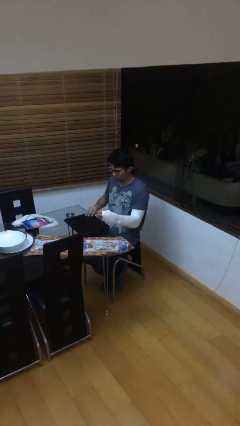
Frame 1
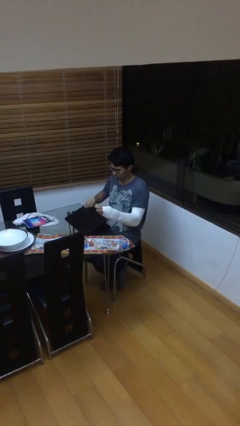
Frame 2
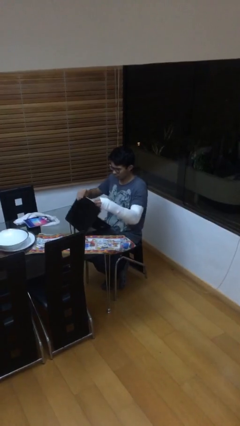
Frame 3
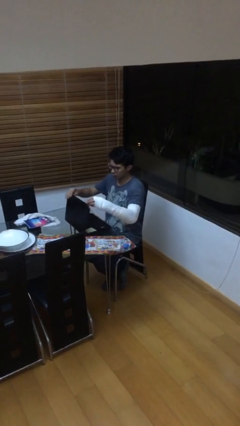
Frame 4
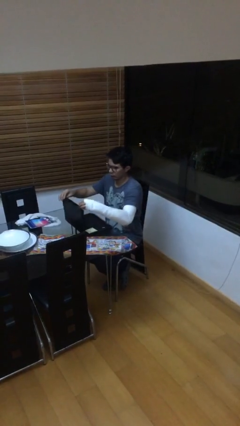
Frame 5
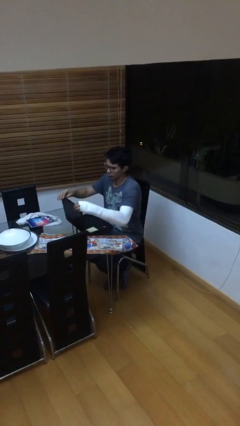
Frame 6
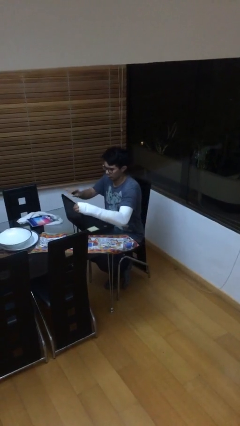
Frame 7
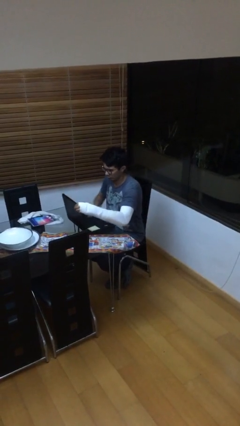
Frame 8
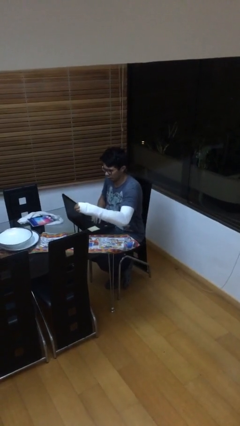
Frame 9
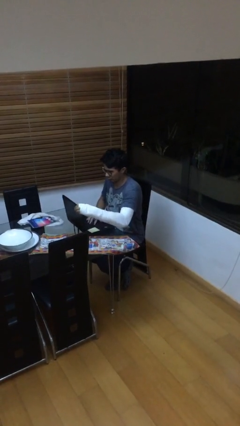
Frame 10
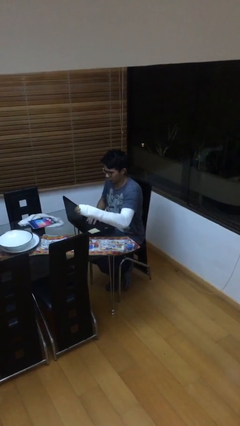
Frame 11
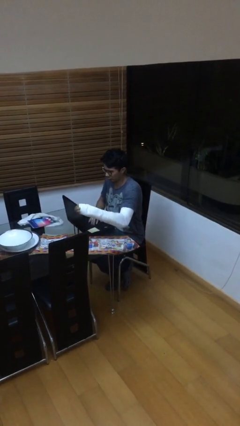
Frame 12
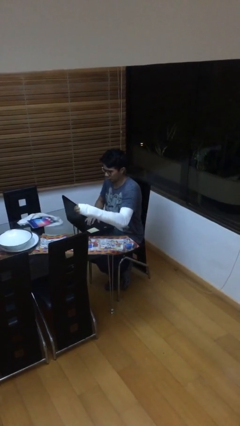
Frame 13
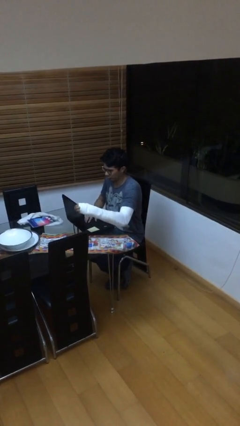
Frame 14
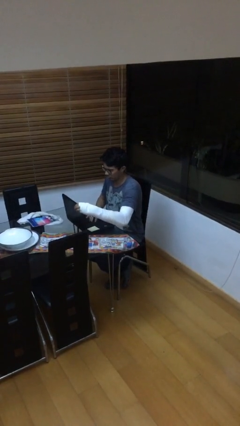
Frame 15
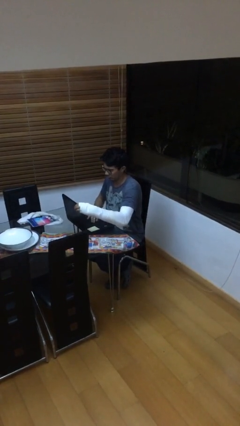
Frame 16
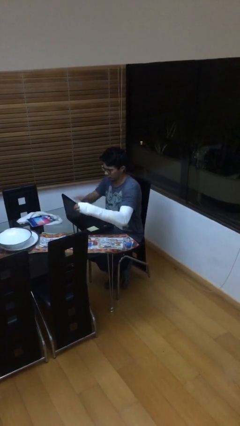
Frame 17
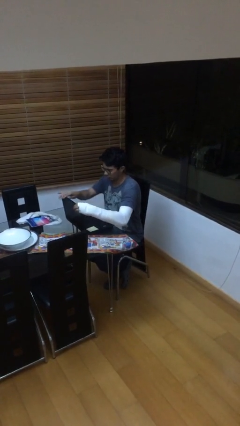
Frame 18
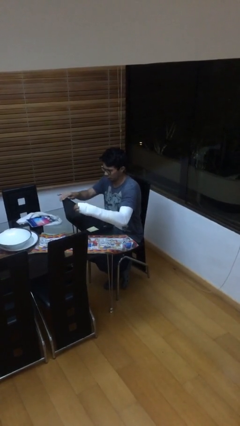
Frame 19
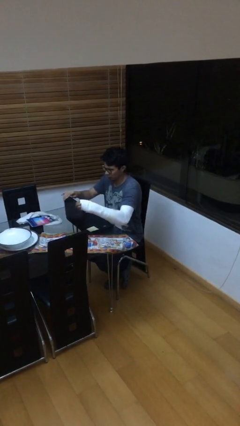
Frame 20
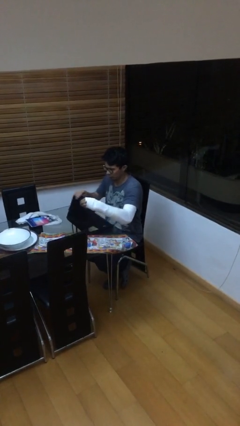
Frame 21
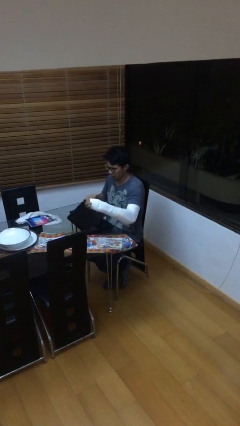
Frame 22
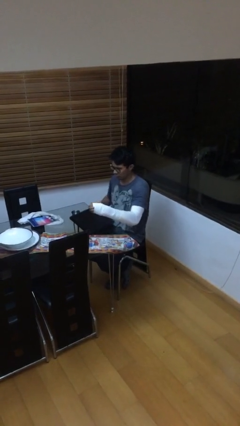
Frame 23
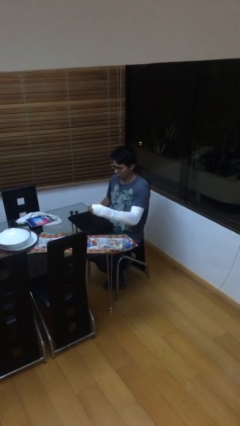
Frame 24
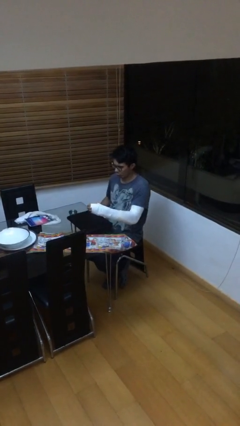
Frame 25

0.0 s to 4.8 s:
person interacts with laptop

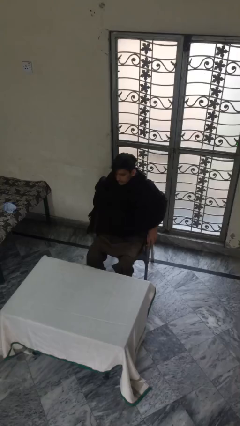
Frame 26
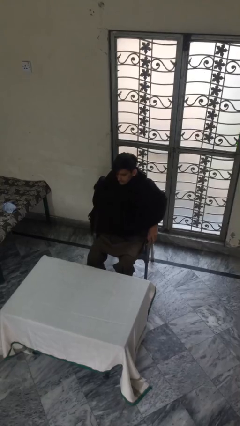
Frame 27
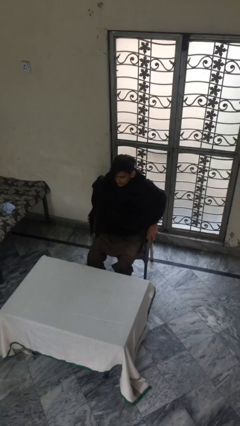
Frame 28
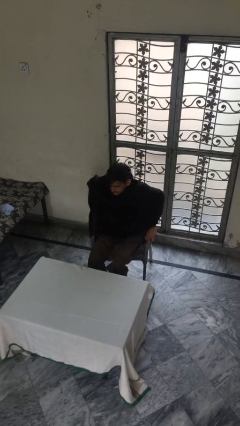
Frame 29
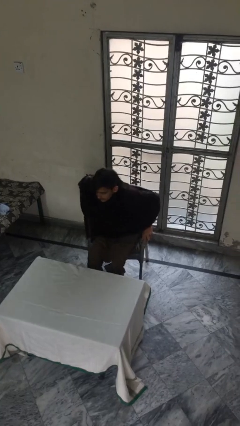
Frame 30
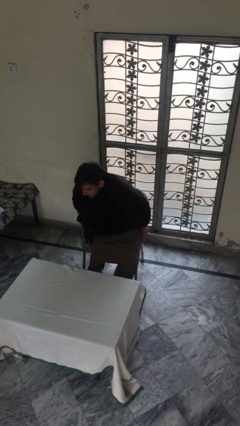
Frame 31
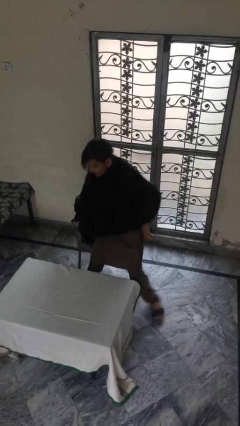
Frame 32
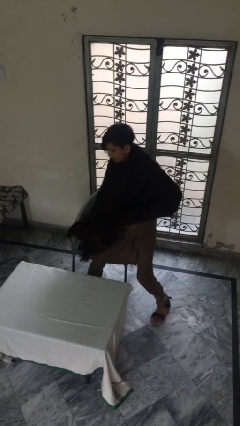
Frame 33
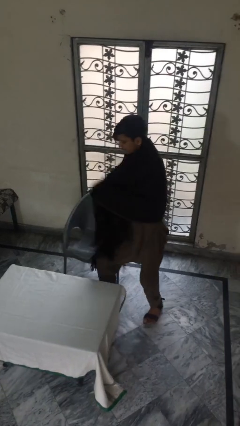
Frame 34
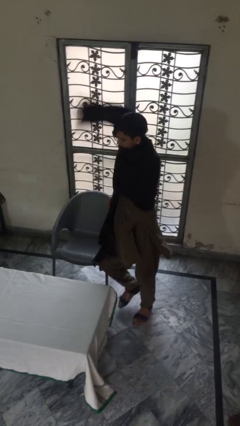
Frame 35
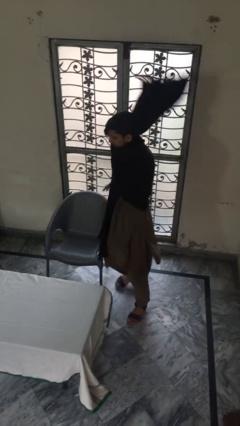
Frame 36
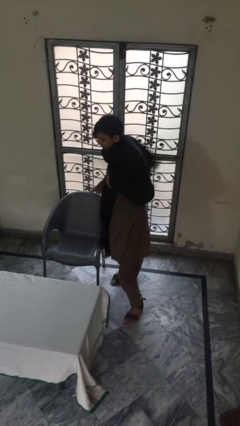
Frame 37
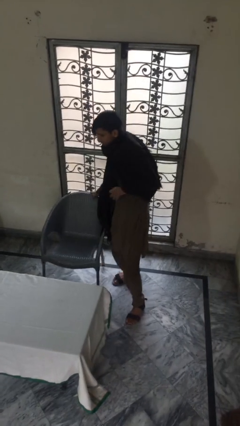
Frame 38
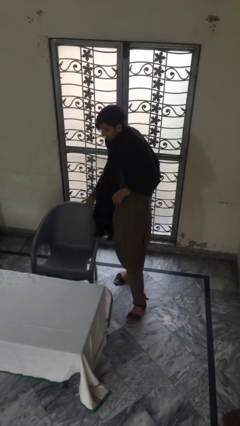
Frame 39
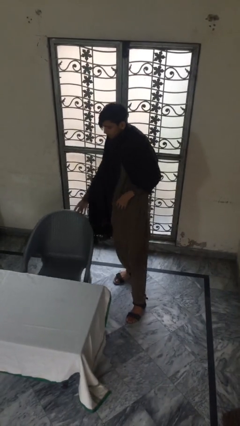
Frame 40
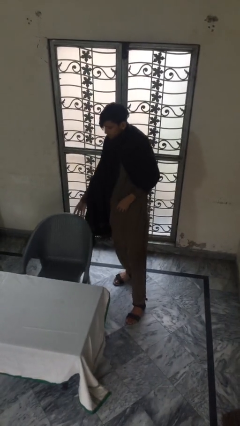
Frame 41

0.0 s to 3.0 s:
person stands up

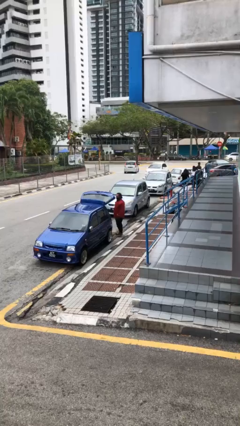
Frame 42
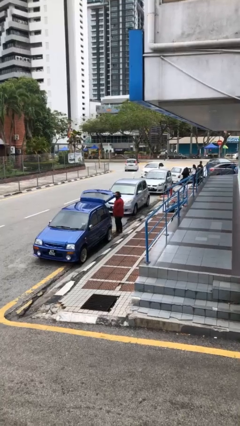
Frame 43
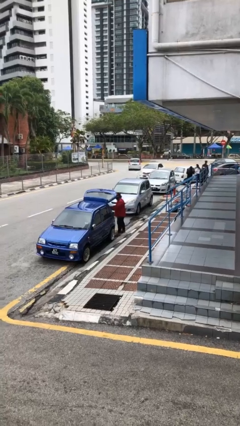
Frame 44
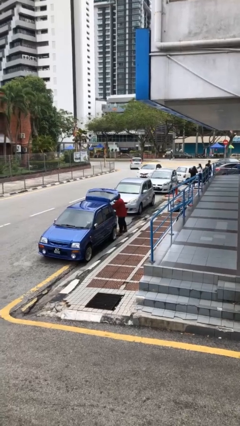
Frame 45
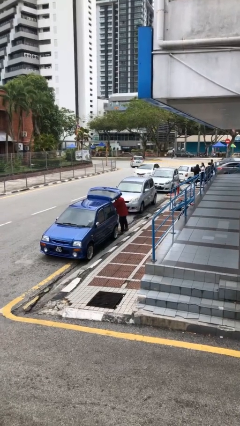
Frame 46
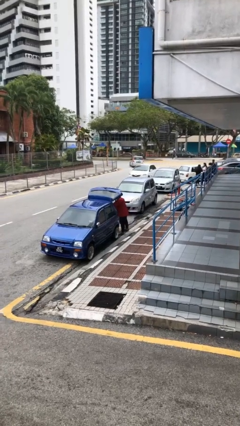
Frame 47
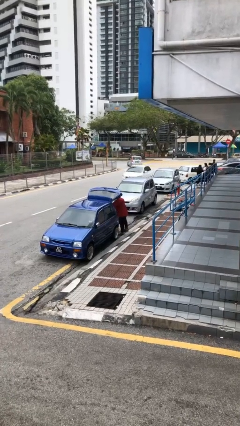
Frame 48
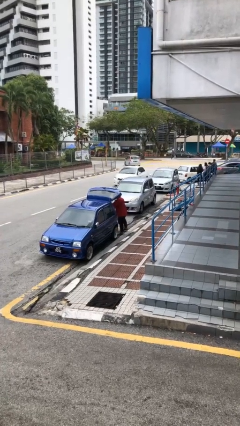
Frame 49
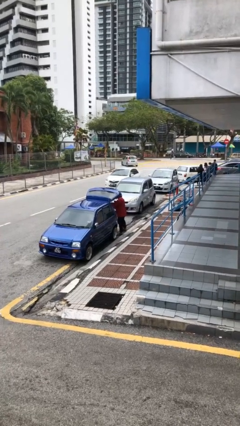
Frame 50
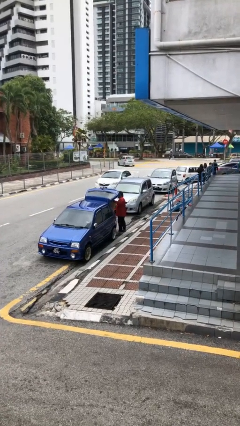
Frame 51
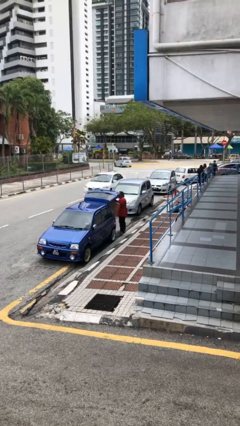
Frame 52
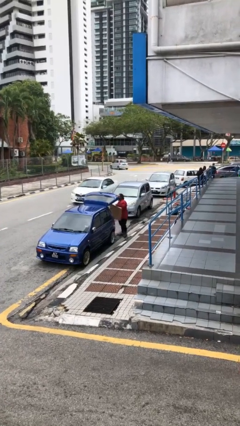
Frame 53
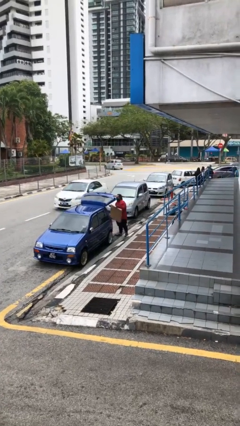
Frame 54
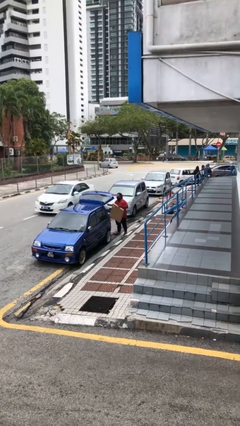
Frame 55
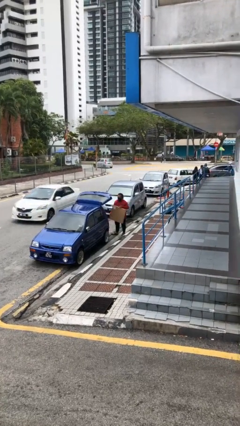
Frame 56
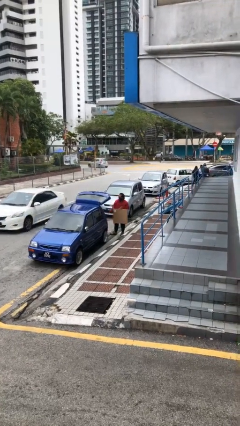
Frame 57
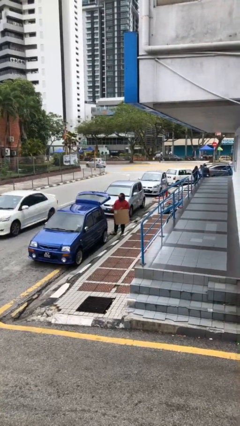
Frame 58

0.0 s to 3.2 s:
person unloads car

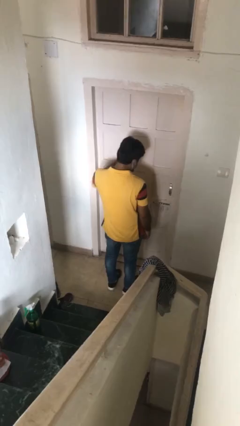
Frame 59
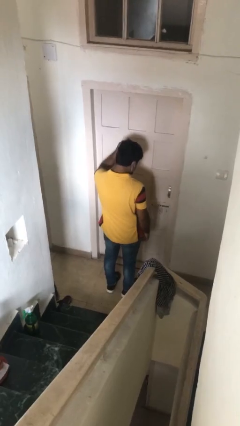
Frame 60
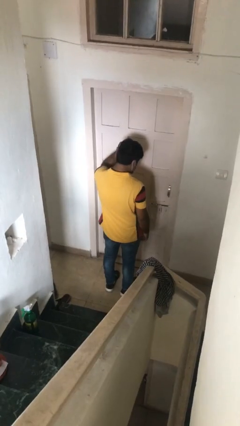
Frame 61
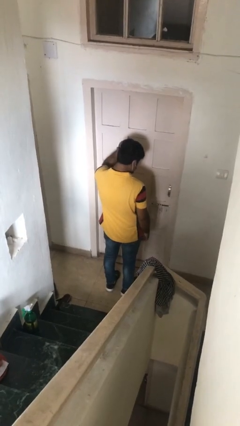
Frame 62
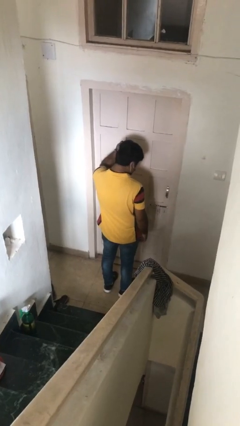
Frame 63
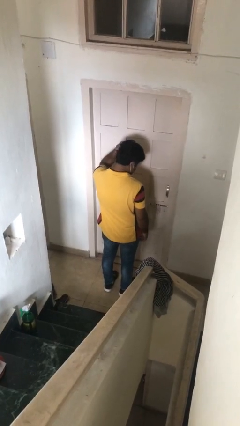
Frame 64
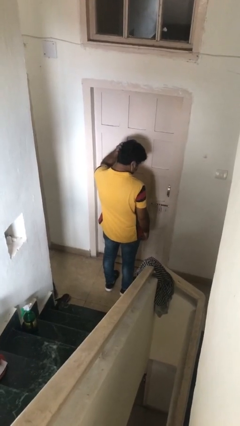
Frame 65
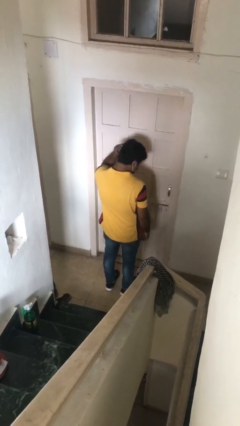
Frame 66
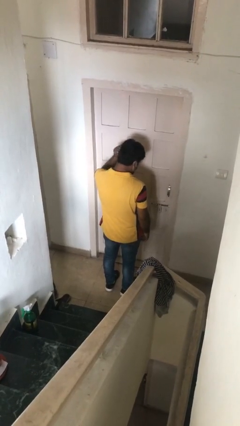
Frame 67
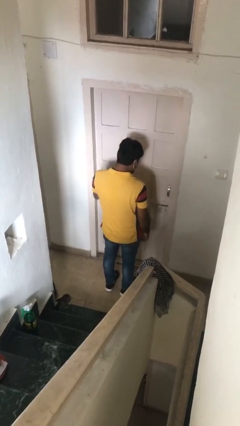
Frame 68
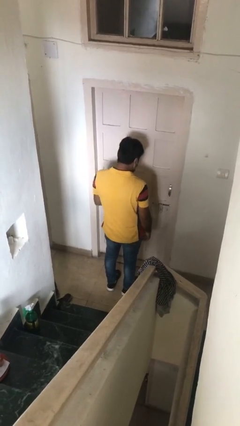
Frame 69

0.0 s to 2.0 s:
person scratches face

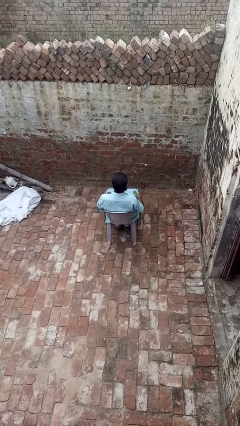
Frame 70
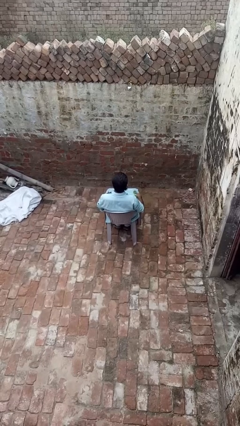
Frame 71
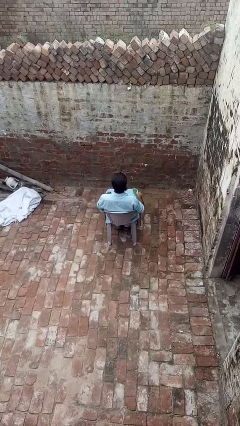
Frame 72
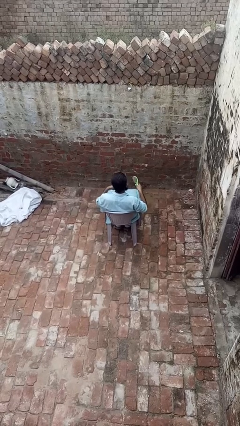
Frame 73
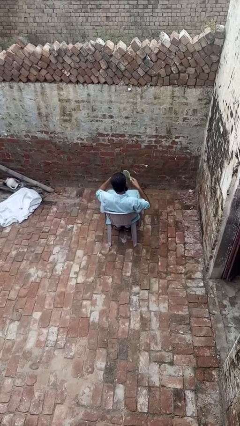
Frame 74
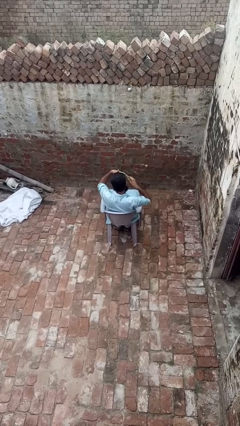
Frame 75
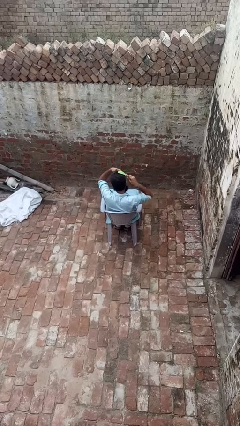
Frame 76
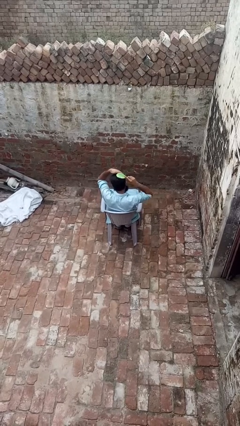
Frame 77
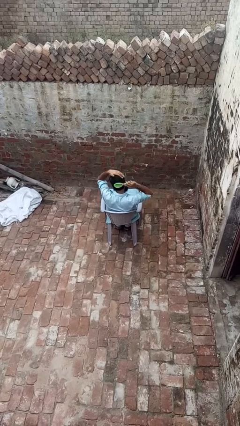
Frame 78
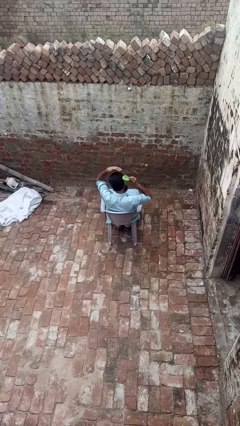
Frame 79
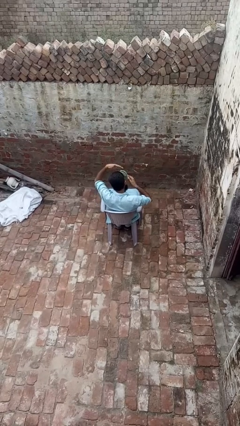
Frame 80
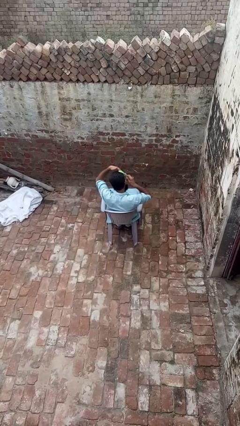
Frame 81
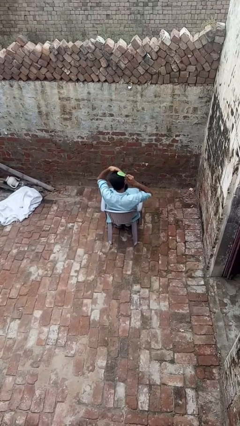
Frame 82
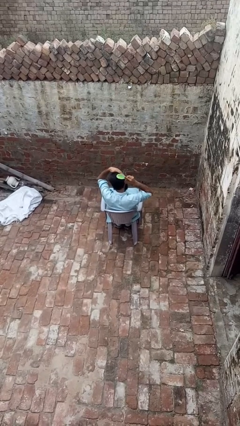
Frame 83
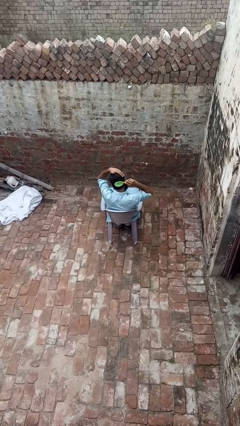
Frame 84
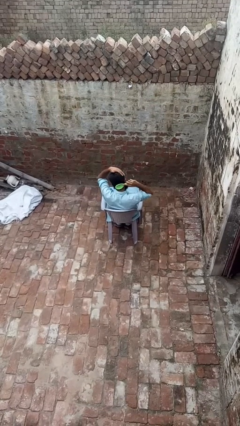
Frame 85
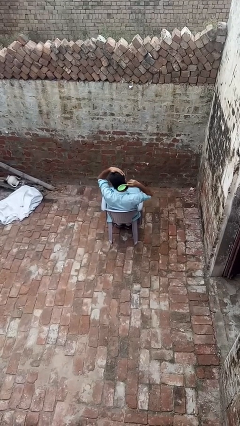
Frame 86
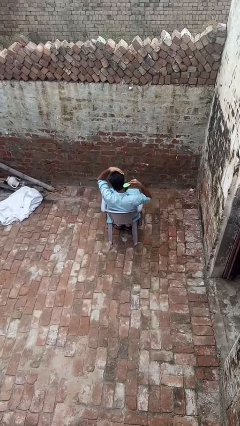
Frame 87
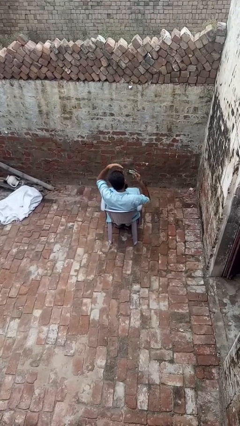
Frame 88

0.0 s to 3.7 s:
person brushes hair

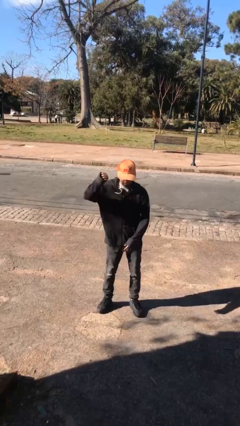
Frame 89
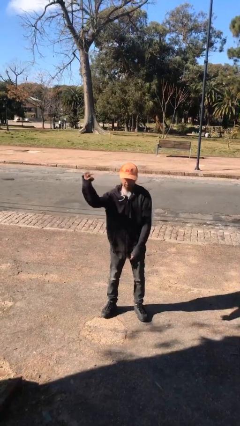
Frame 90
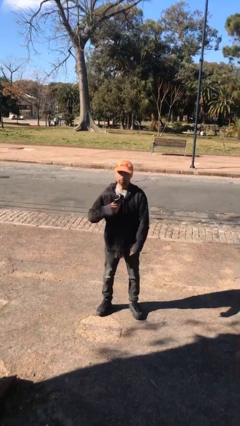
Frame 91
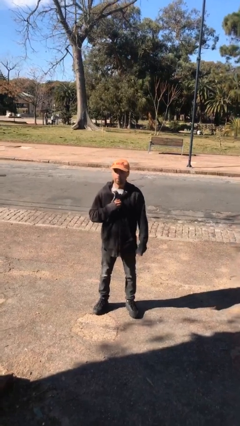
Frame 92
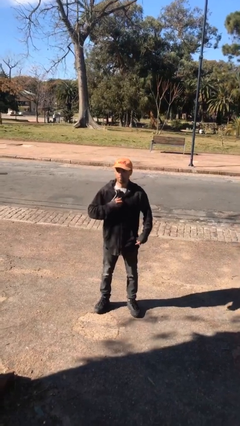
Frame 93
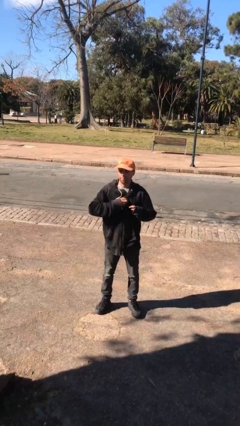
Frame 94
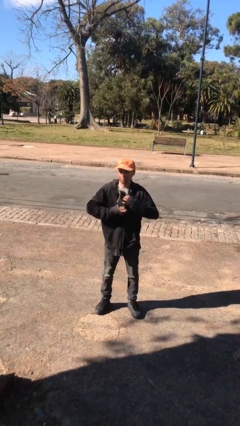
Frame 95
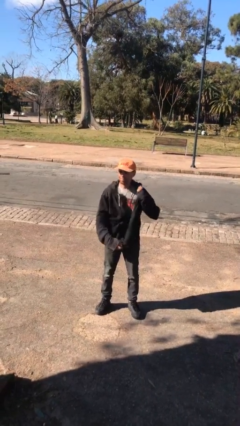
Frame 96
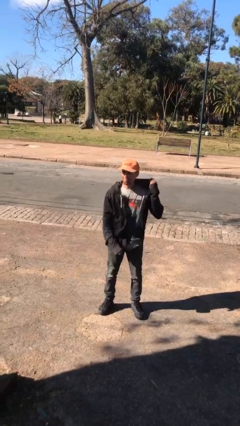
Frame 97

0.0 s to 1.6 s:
person unzips jacket
